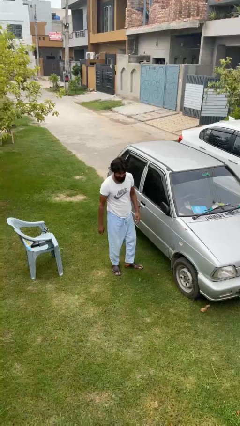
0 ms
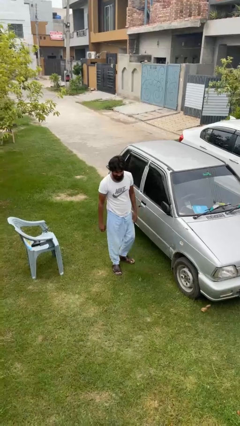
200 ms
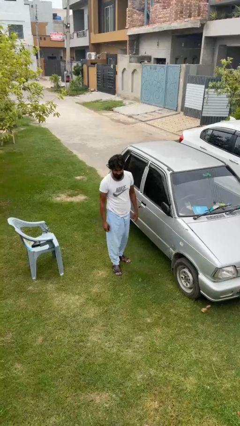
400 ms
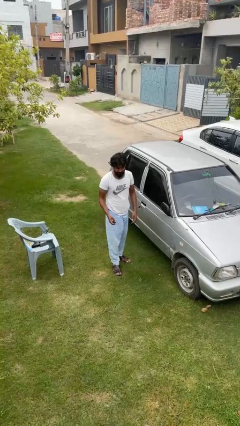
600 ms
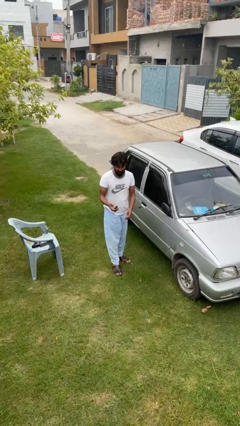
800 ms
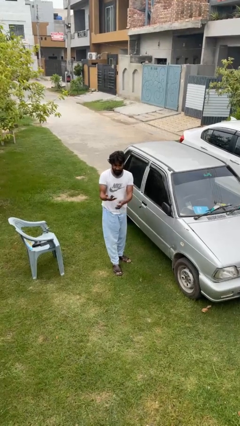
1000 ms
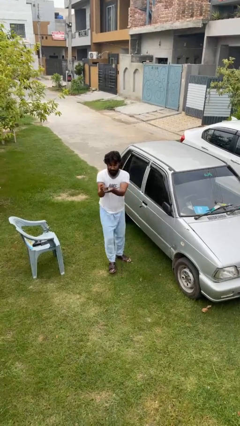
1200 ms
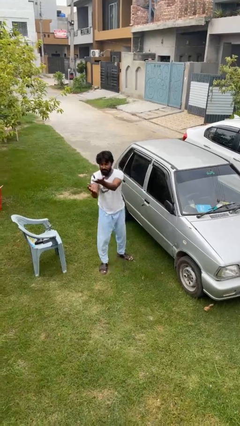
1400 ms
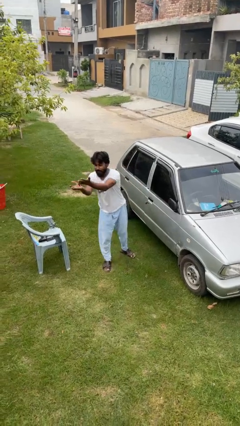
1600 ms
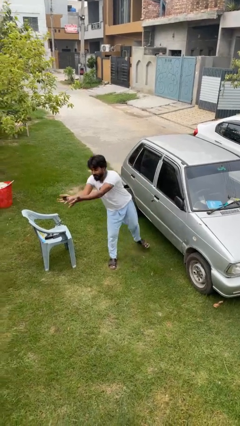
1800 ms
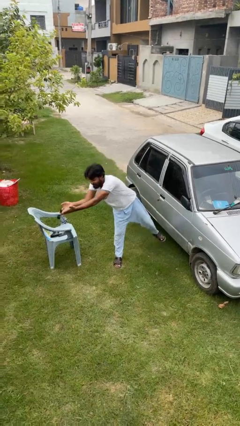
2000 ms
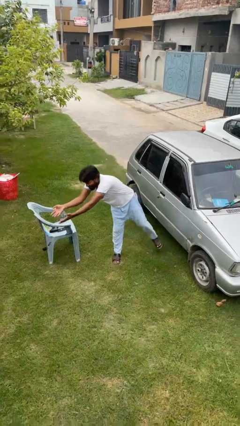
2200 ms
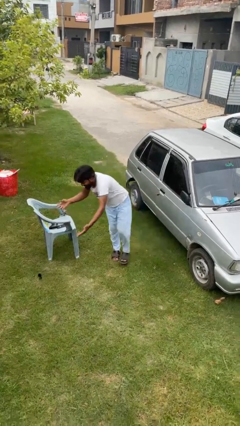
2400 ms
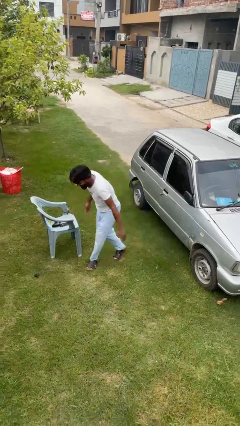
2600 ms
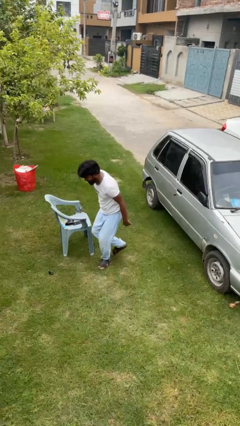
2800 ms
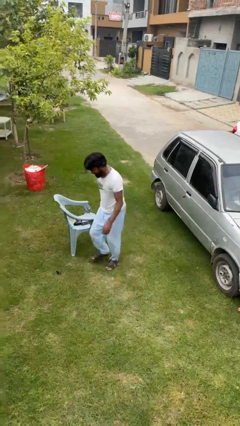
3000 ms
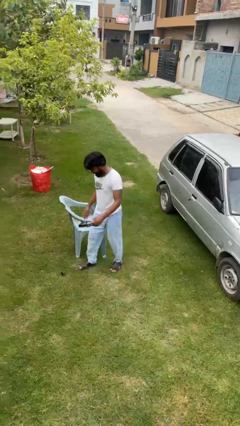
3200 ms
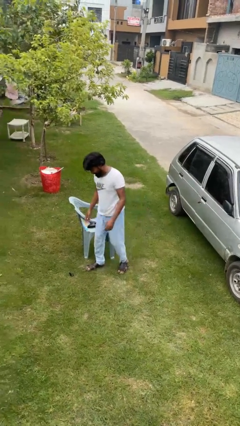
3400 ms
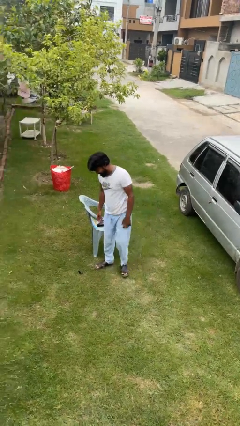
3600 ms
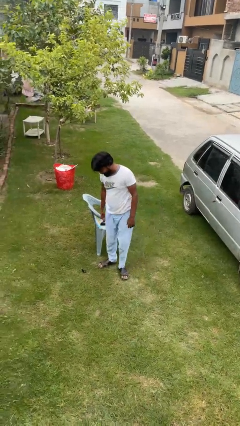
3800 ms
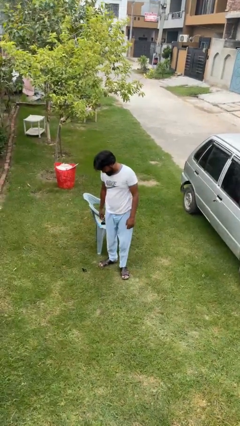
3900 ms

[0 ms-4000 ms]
person drops object

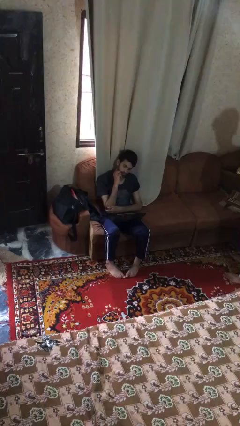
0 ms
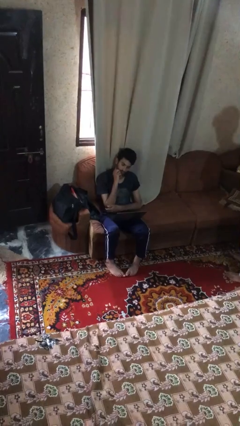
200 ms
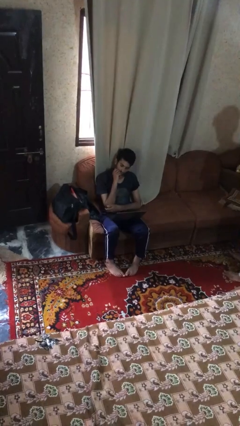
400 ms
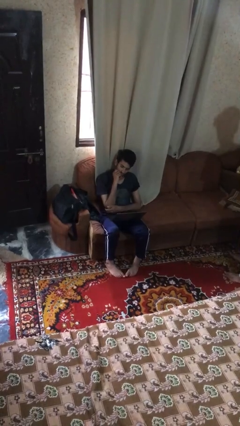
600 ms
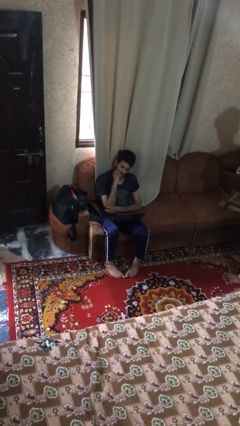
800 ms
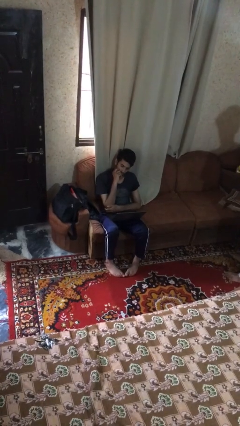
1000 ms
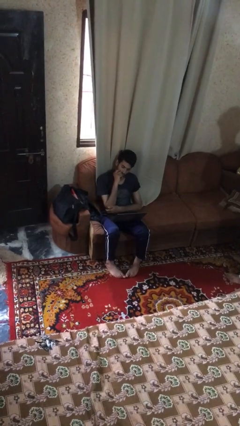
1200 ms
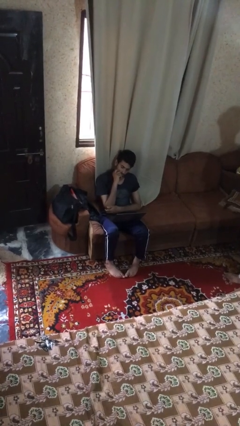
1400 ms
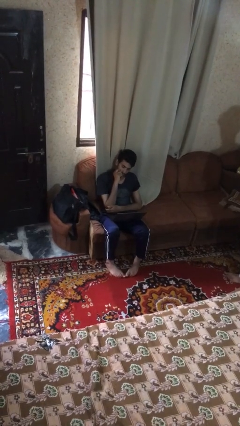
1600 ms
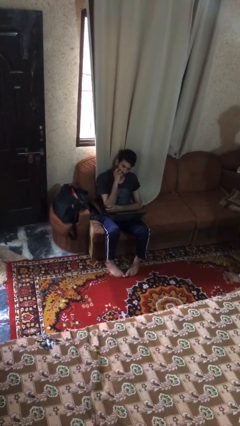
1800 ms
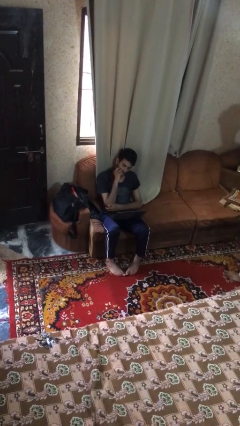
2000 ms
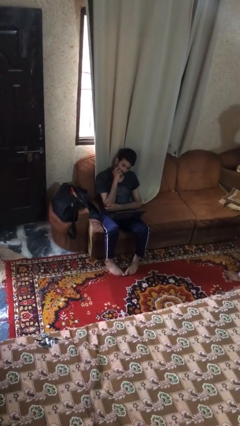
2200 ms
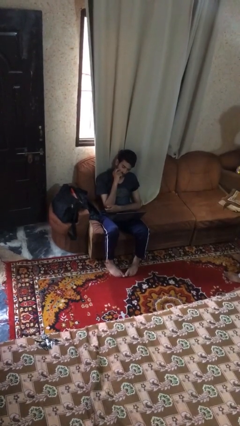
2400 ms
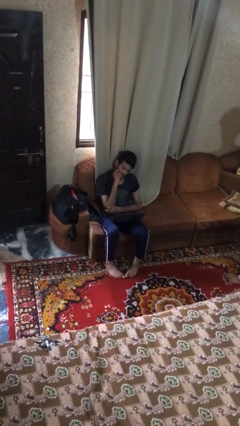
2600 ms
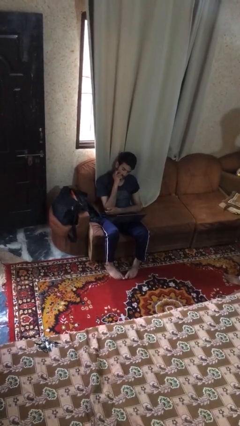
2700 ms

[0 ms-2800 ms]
person interacts with laptop

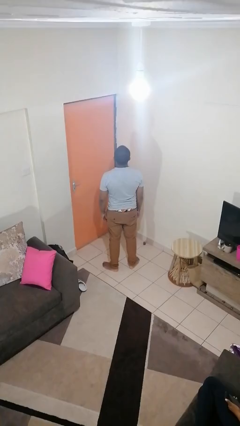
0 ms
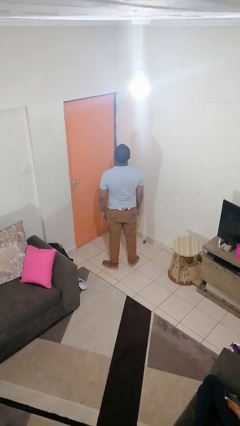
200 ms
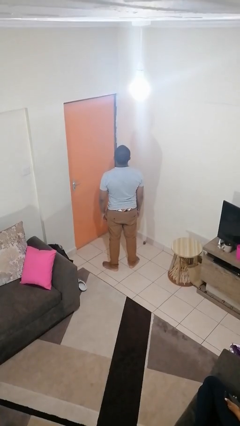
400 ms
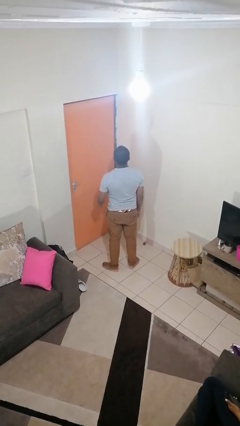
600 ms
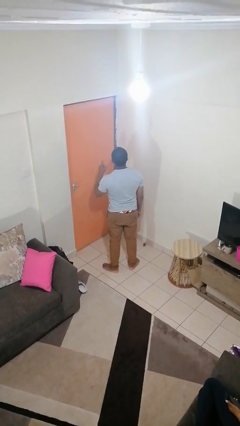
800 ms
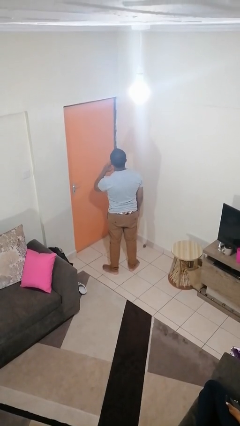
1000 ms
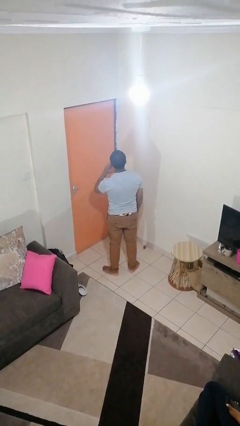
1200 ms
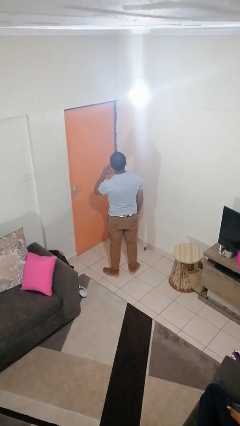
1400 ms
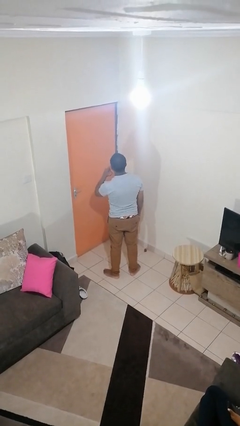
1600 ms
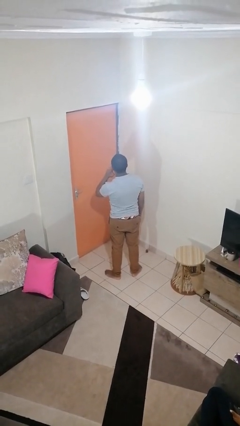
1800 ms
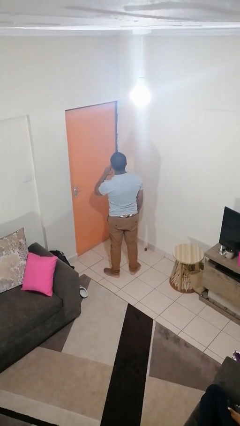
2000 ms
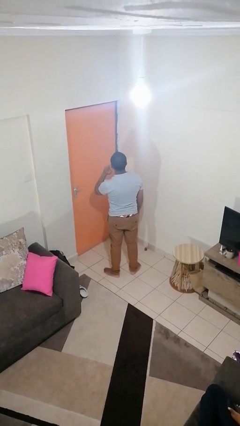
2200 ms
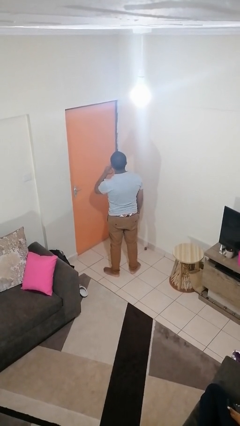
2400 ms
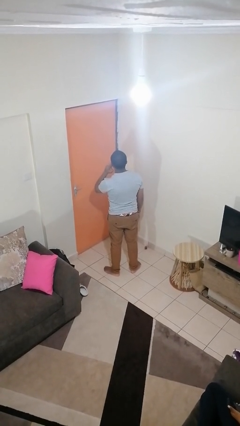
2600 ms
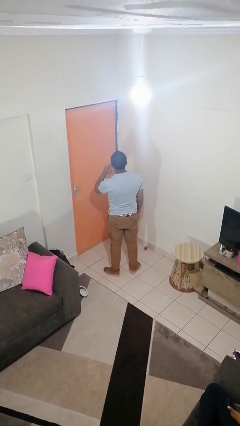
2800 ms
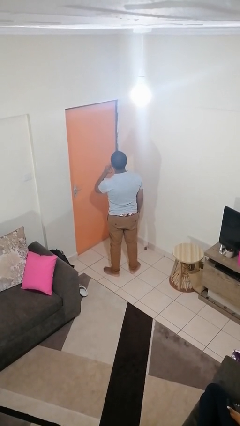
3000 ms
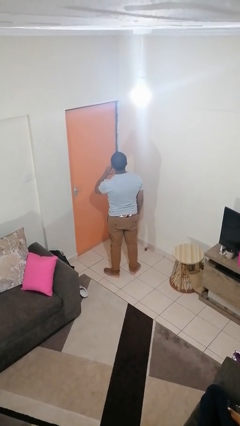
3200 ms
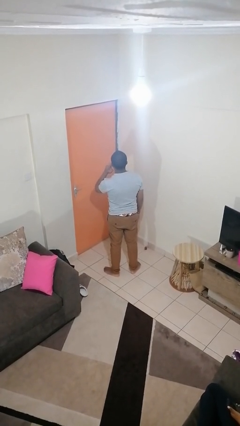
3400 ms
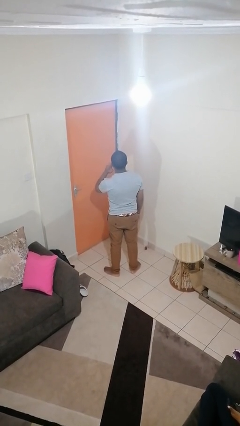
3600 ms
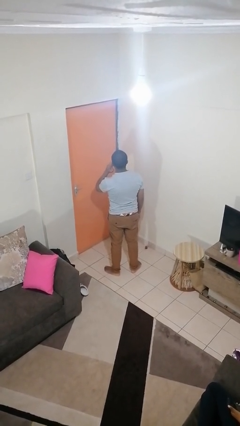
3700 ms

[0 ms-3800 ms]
person gestures listen closely

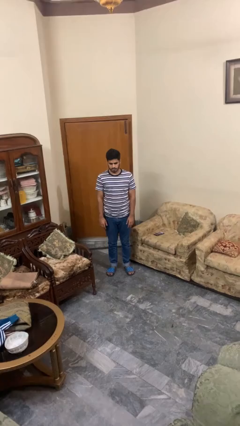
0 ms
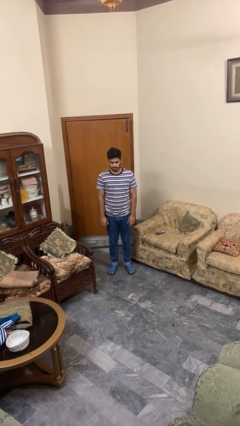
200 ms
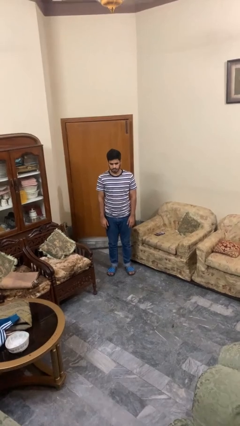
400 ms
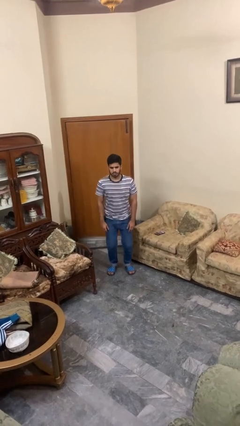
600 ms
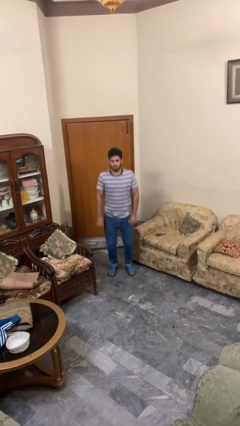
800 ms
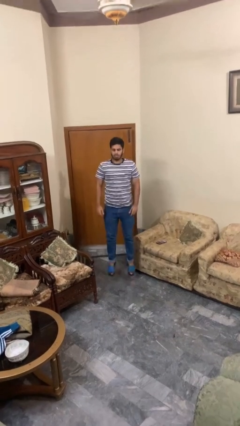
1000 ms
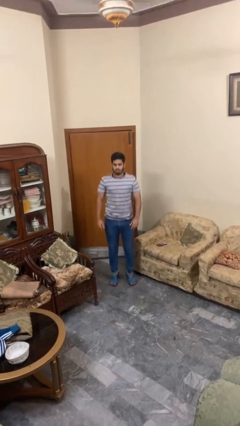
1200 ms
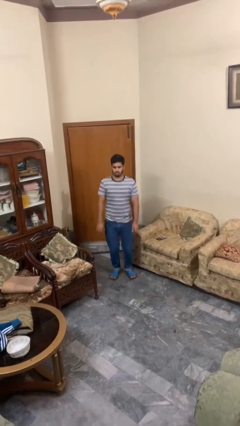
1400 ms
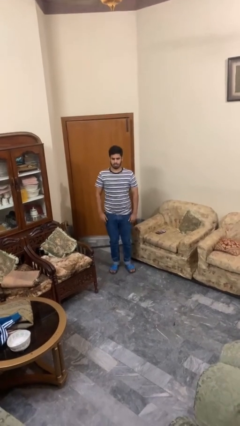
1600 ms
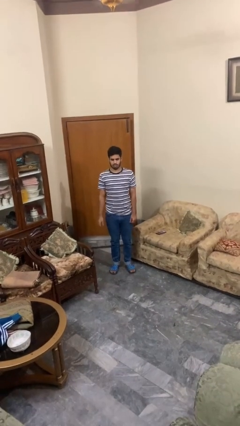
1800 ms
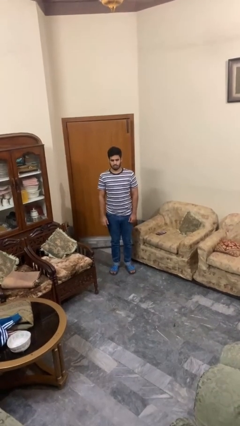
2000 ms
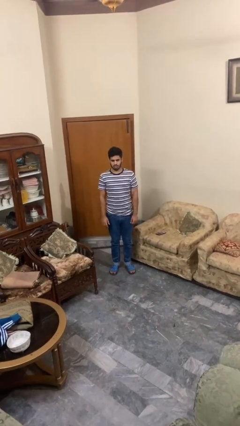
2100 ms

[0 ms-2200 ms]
person jumps

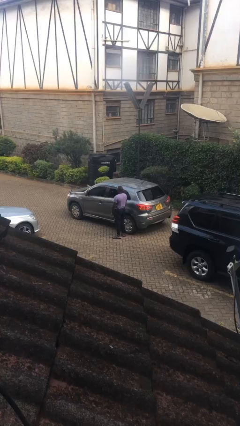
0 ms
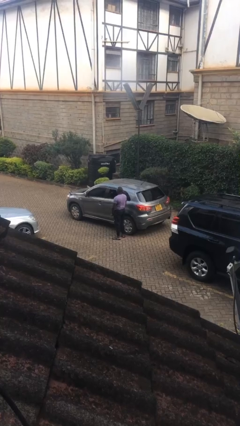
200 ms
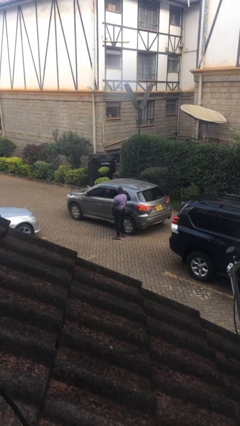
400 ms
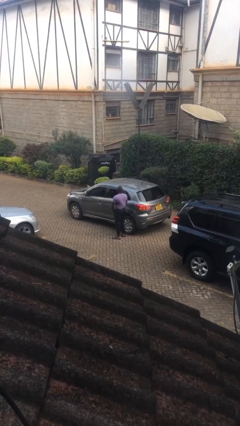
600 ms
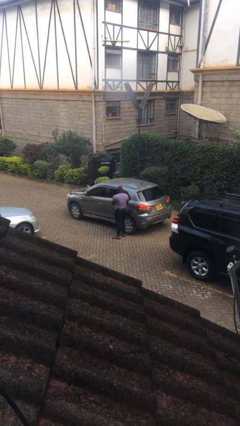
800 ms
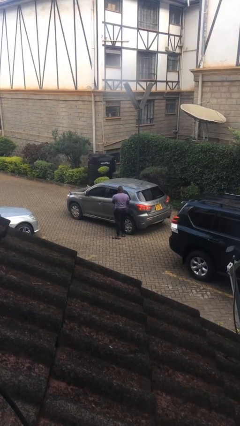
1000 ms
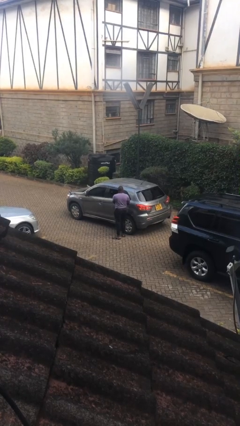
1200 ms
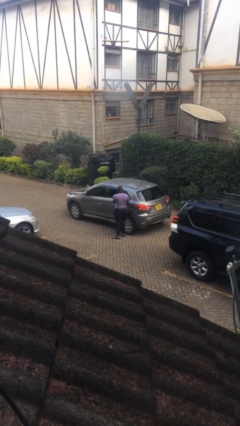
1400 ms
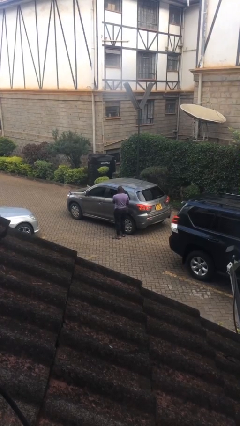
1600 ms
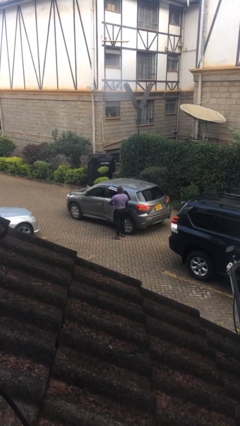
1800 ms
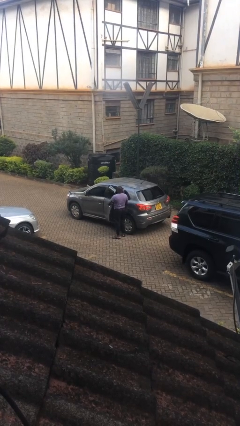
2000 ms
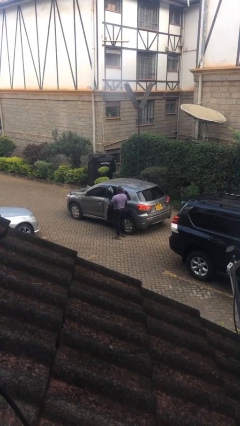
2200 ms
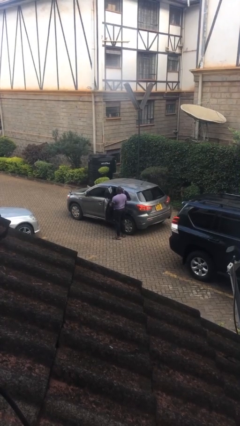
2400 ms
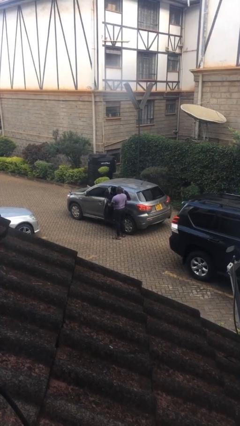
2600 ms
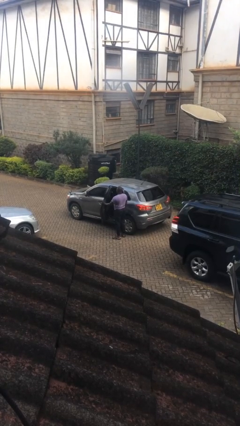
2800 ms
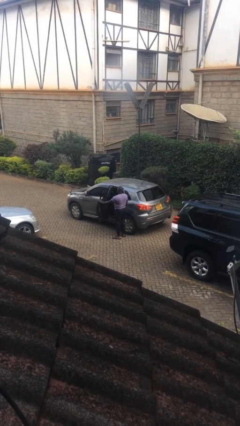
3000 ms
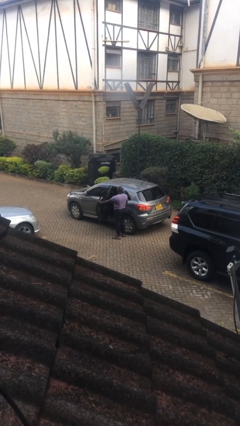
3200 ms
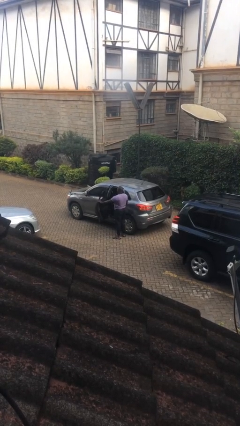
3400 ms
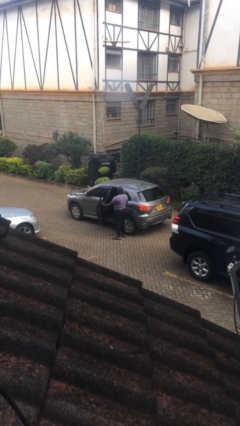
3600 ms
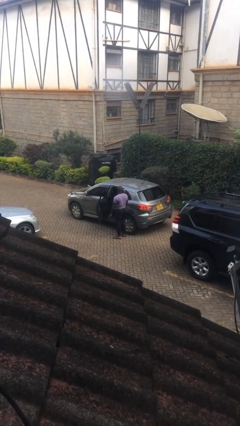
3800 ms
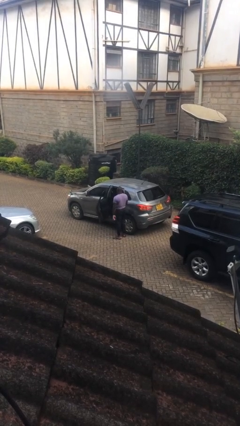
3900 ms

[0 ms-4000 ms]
person opens car door

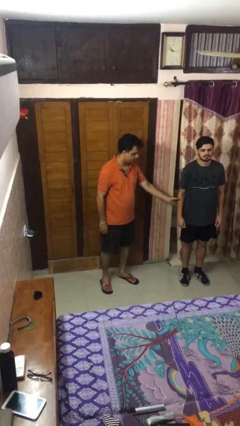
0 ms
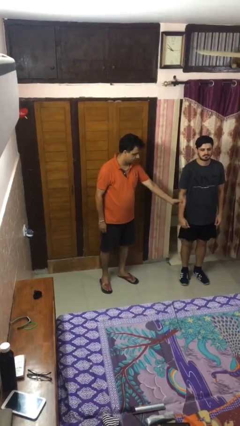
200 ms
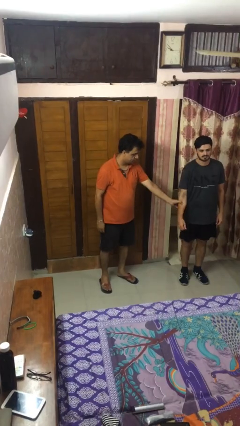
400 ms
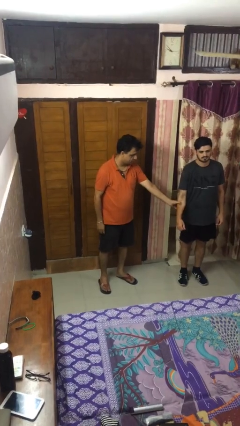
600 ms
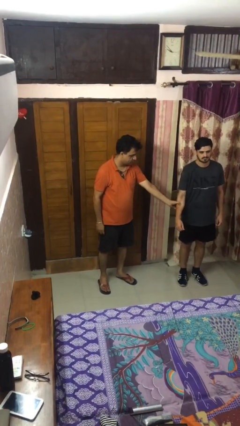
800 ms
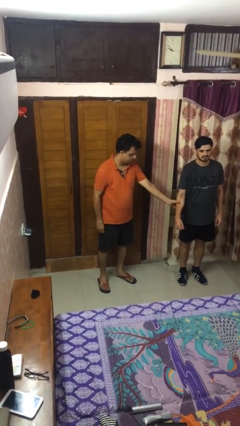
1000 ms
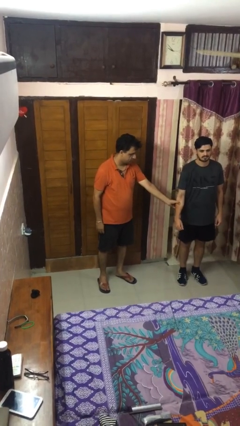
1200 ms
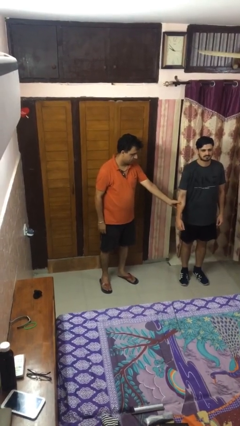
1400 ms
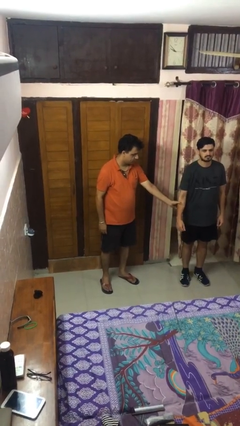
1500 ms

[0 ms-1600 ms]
person grabs person by forearm
